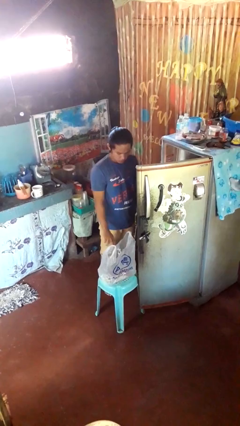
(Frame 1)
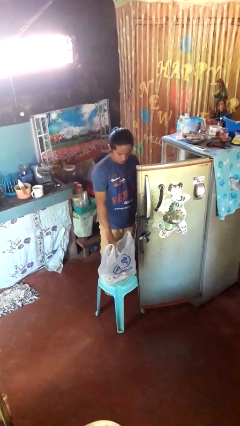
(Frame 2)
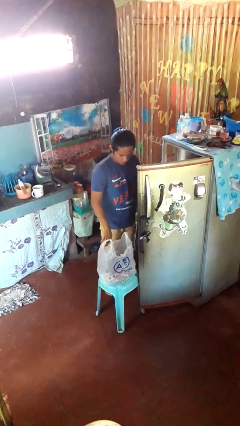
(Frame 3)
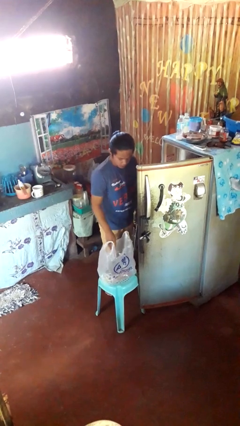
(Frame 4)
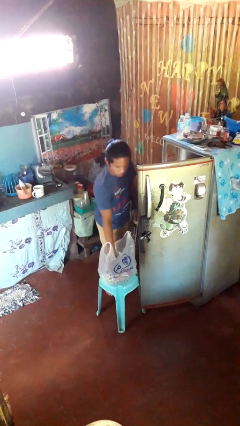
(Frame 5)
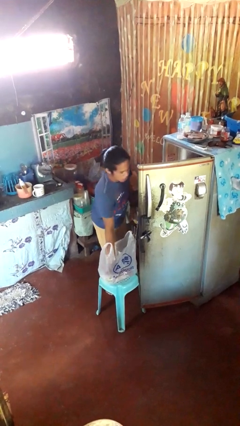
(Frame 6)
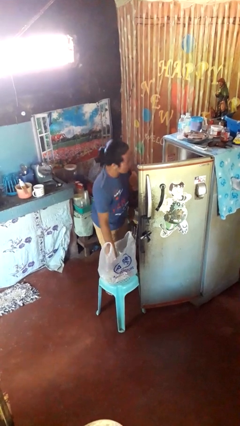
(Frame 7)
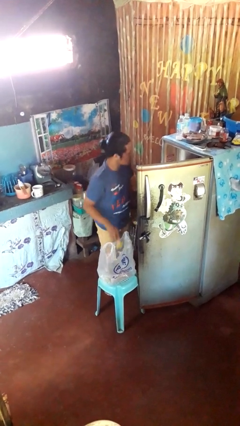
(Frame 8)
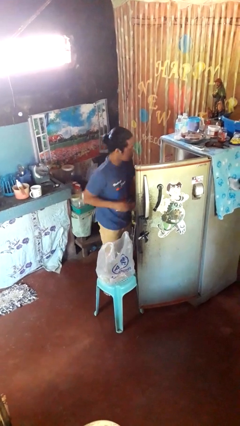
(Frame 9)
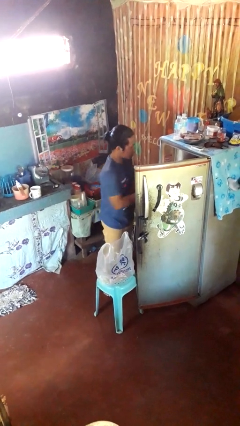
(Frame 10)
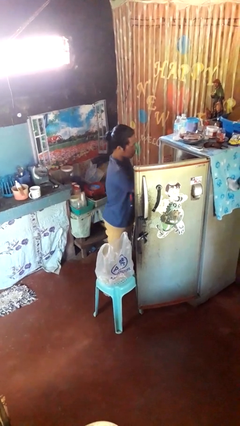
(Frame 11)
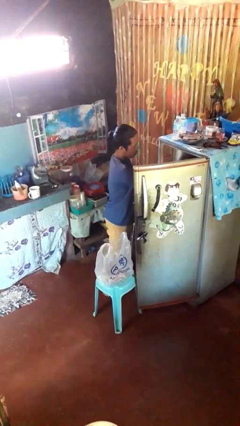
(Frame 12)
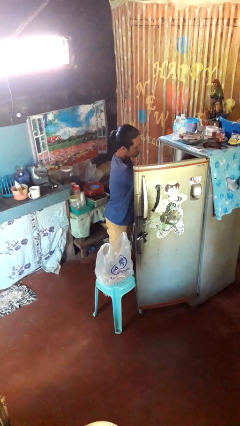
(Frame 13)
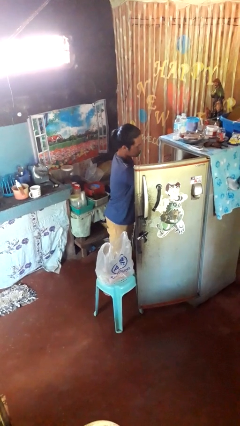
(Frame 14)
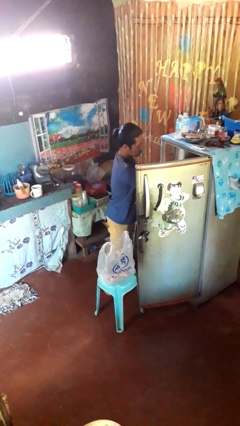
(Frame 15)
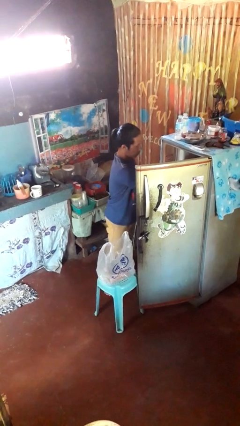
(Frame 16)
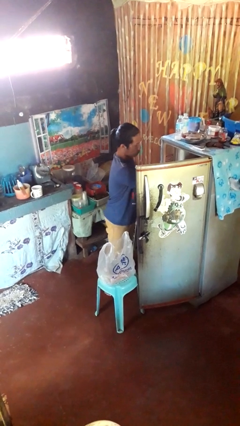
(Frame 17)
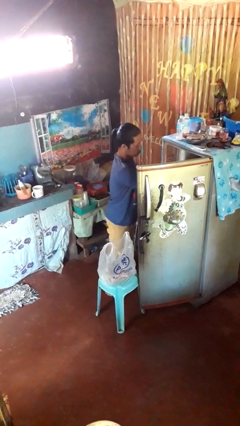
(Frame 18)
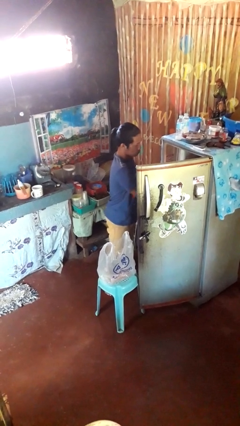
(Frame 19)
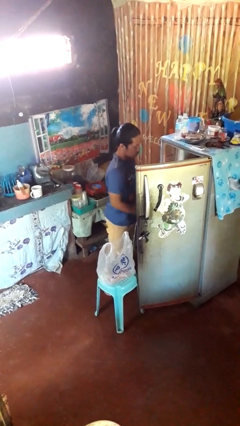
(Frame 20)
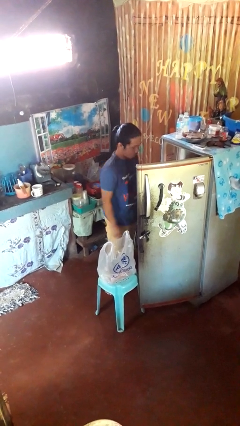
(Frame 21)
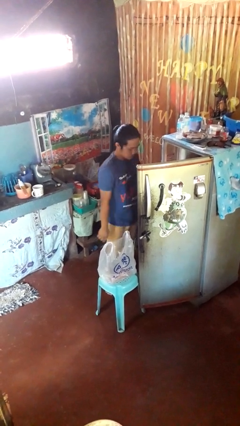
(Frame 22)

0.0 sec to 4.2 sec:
person loads groceries into refrigerator

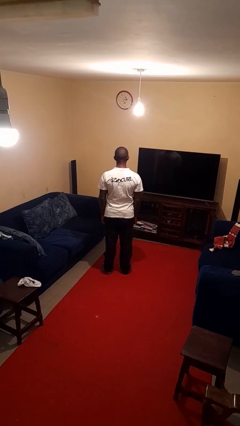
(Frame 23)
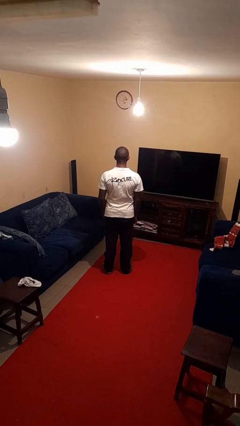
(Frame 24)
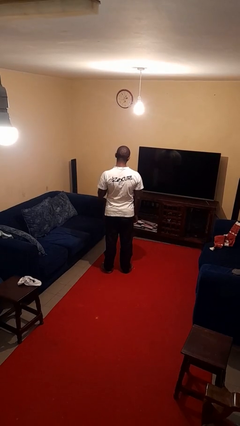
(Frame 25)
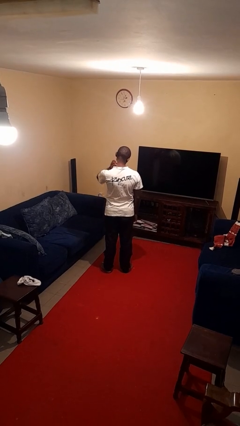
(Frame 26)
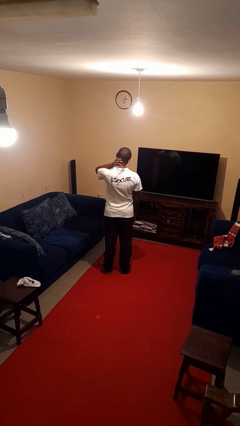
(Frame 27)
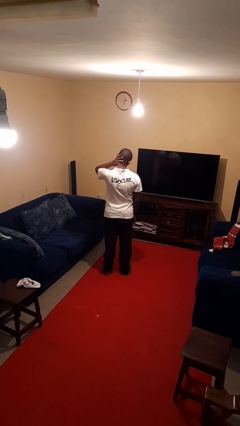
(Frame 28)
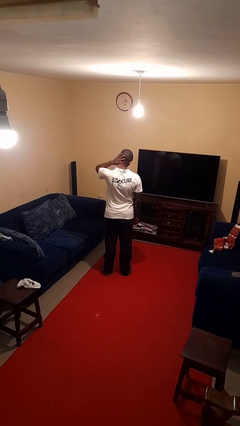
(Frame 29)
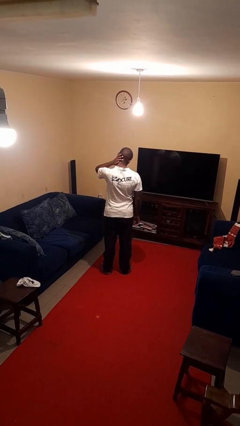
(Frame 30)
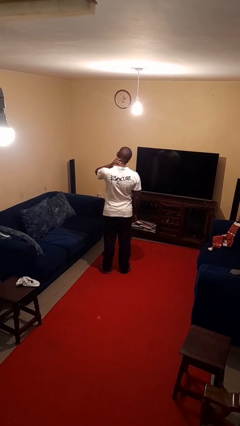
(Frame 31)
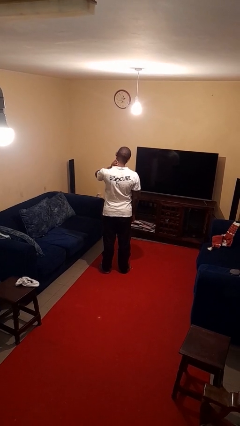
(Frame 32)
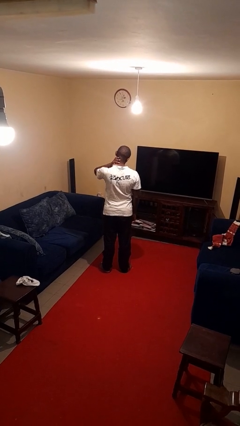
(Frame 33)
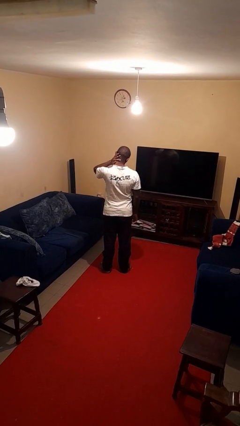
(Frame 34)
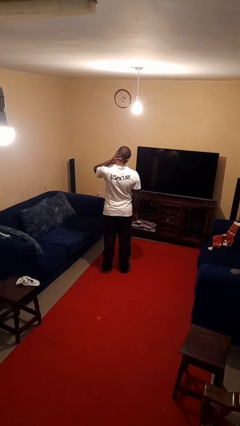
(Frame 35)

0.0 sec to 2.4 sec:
person rubs neck

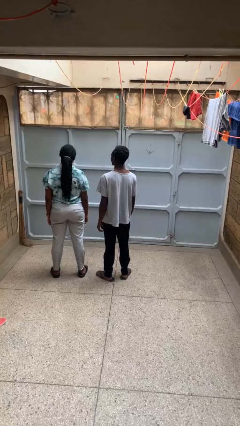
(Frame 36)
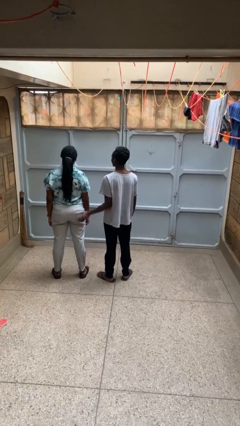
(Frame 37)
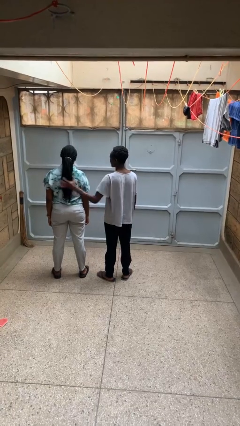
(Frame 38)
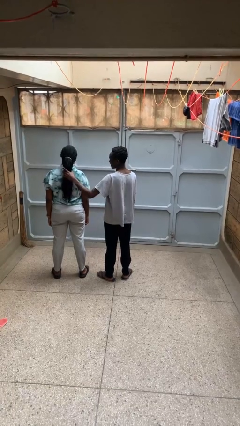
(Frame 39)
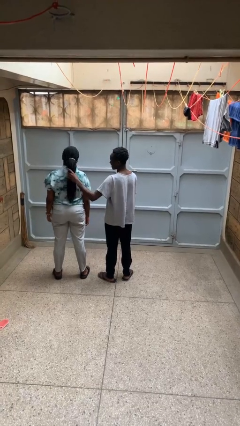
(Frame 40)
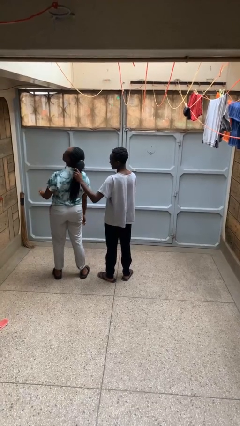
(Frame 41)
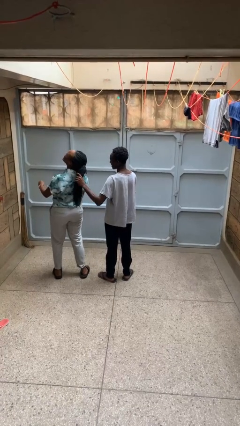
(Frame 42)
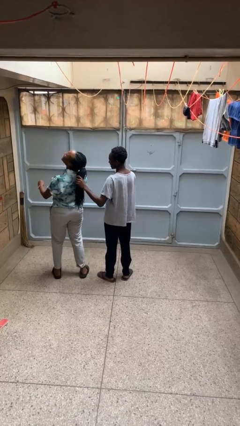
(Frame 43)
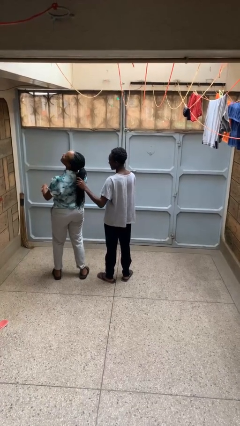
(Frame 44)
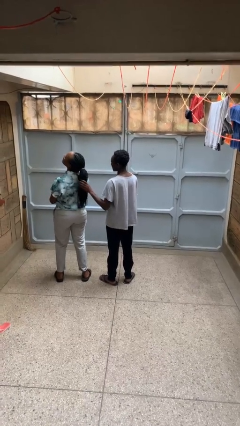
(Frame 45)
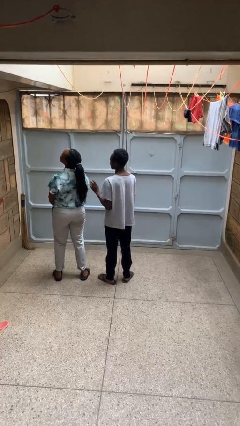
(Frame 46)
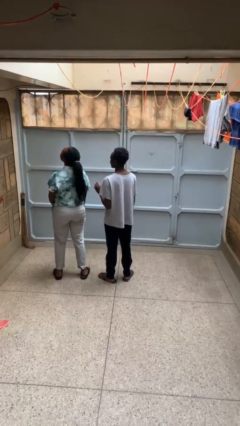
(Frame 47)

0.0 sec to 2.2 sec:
person grabs person by hair

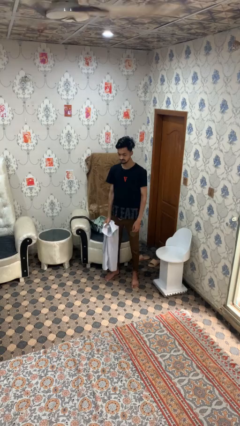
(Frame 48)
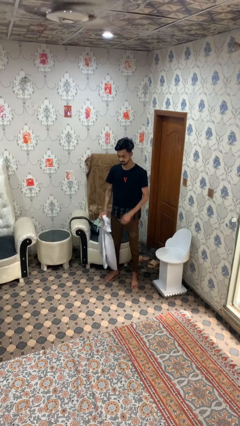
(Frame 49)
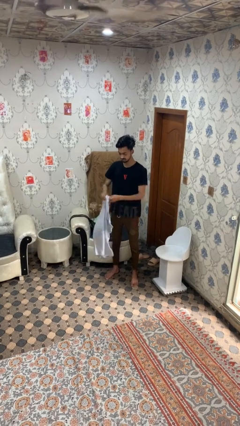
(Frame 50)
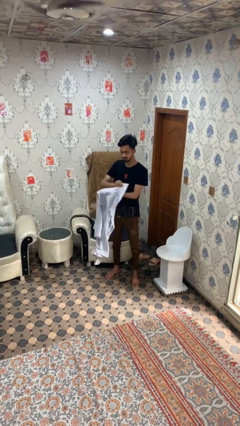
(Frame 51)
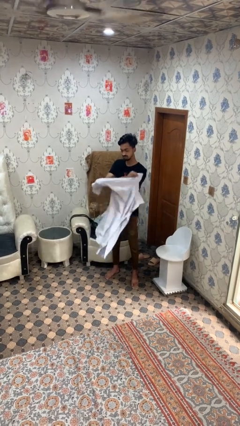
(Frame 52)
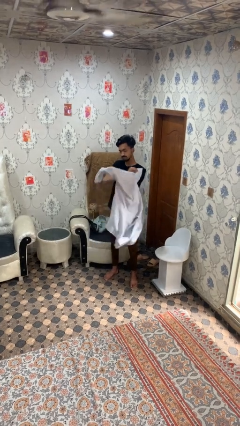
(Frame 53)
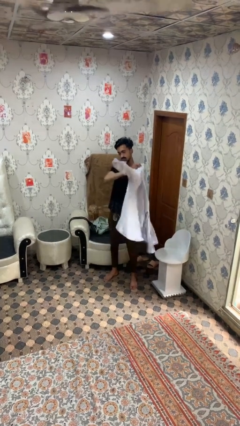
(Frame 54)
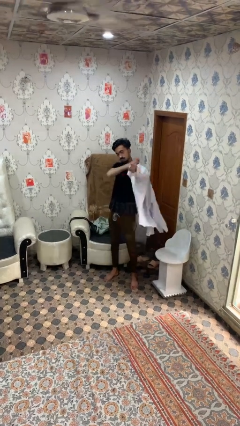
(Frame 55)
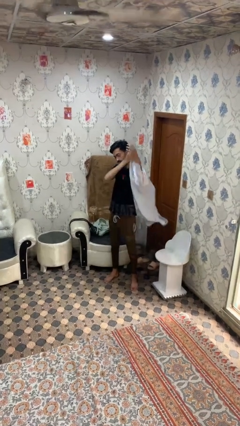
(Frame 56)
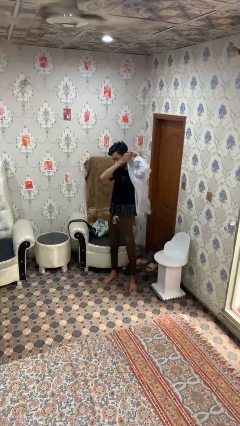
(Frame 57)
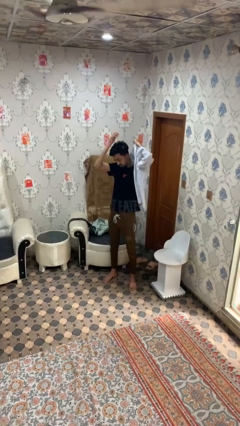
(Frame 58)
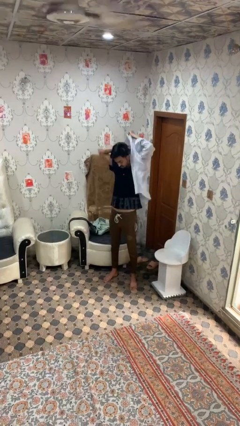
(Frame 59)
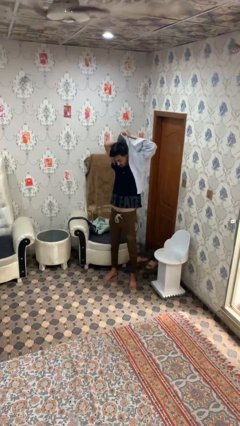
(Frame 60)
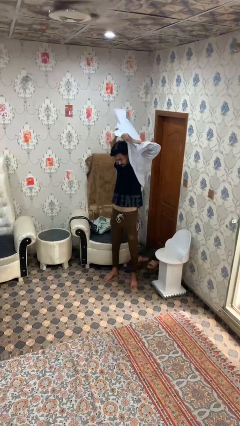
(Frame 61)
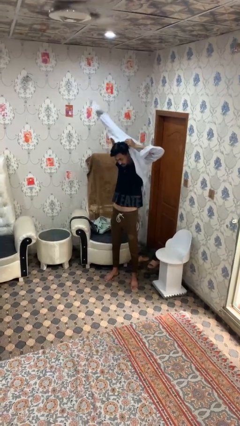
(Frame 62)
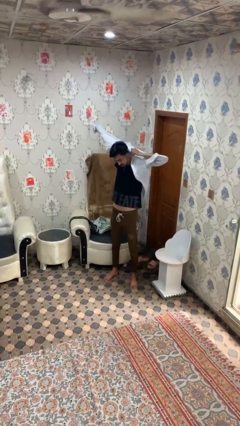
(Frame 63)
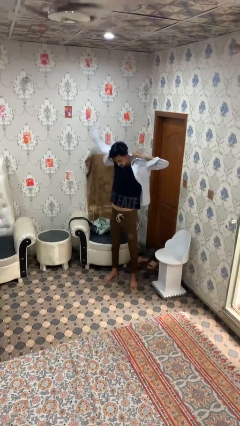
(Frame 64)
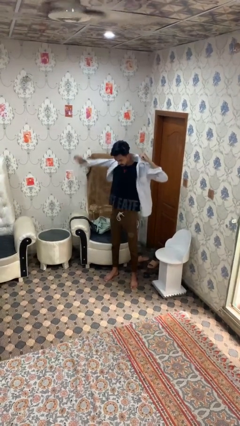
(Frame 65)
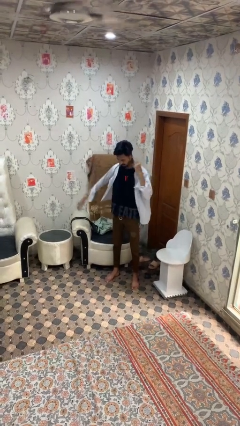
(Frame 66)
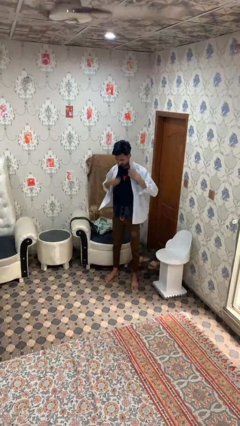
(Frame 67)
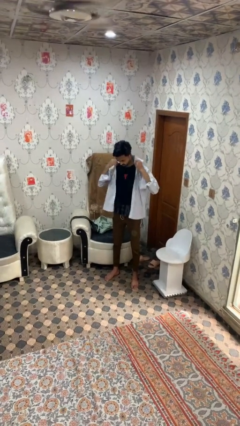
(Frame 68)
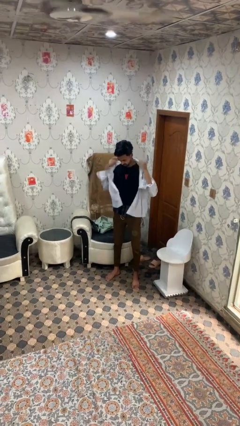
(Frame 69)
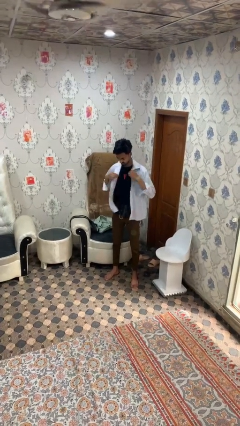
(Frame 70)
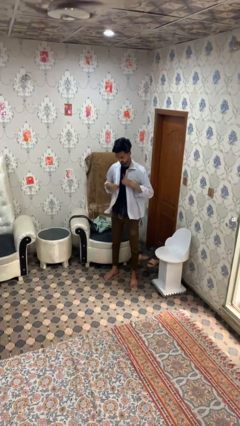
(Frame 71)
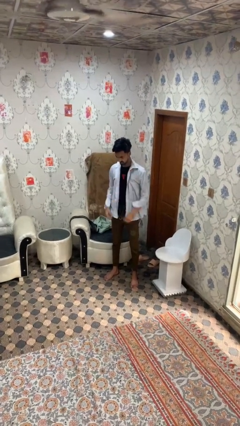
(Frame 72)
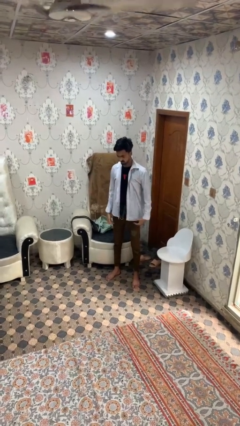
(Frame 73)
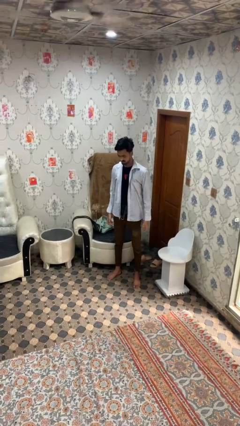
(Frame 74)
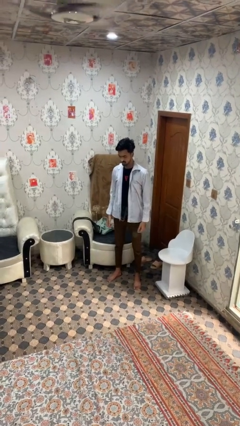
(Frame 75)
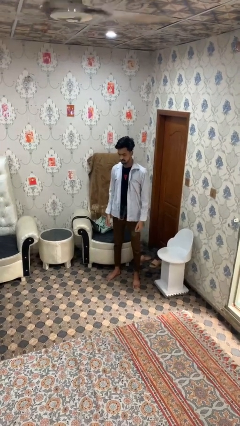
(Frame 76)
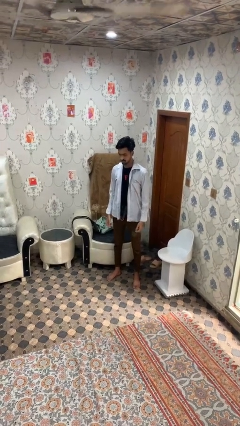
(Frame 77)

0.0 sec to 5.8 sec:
person puts on shirt

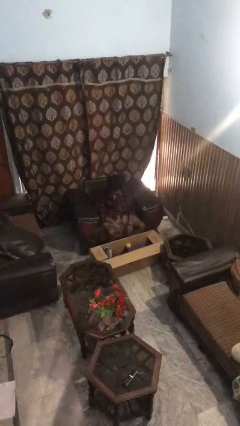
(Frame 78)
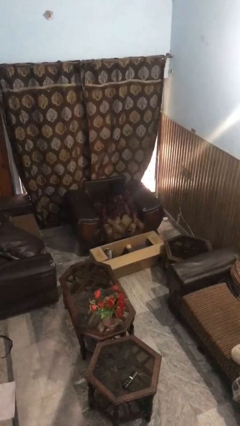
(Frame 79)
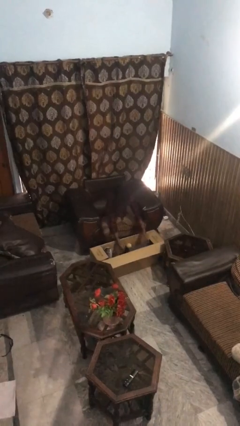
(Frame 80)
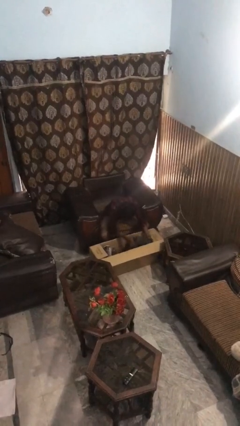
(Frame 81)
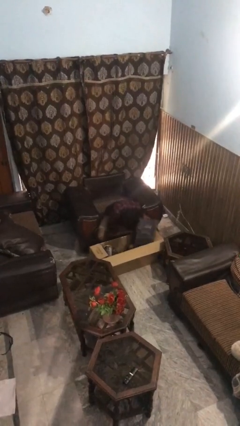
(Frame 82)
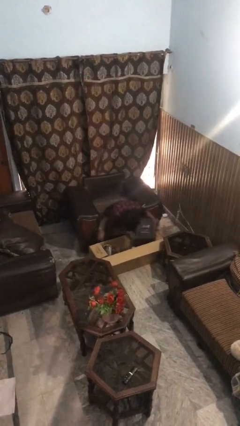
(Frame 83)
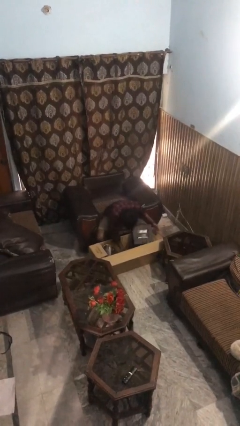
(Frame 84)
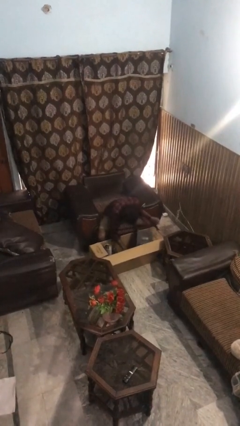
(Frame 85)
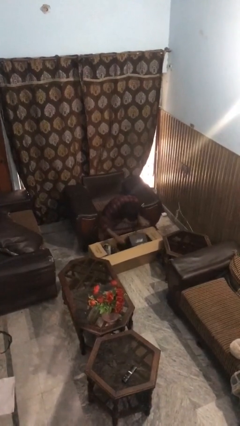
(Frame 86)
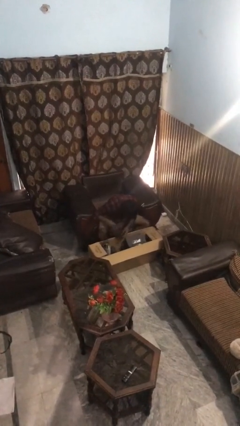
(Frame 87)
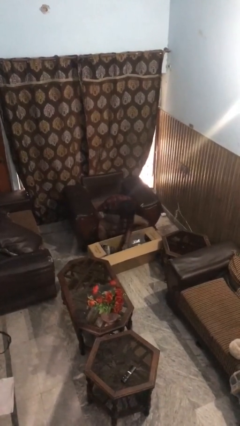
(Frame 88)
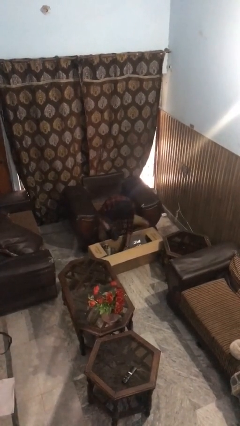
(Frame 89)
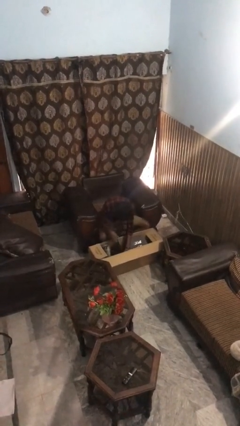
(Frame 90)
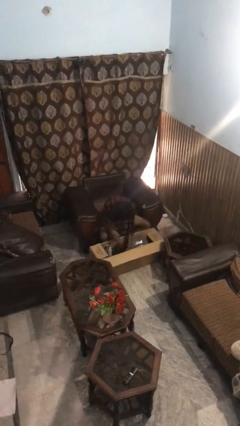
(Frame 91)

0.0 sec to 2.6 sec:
person searches in box

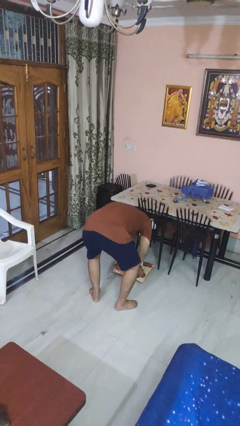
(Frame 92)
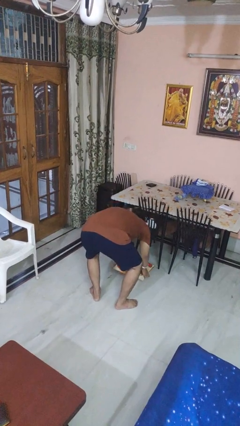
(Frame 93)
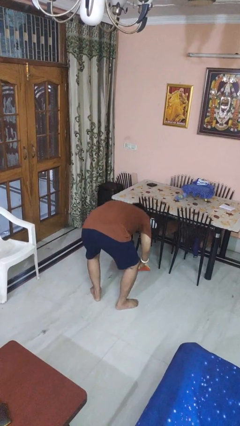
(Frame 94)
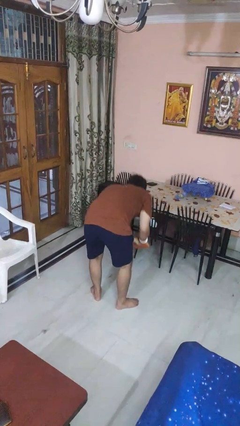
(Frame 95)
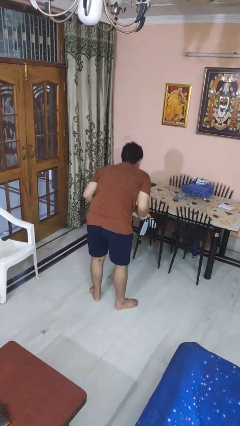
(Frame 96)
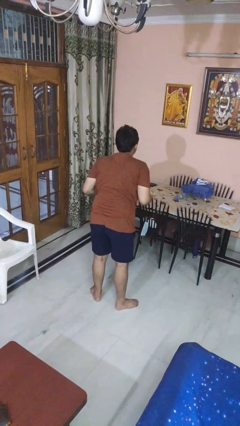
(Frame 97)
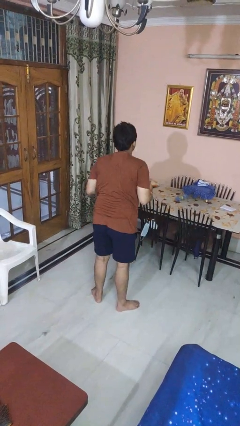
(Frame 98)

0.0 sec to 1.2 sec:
person picks up object from floor
